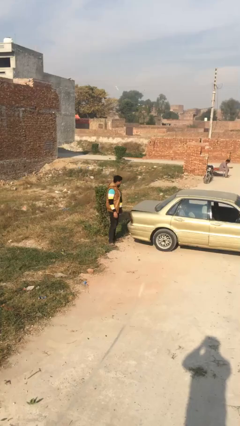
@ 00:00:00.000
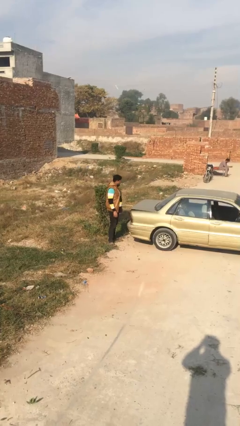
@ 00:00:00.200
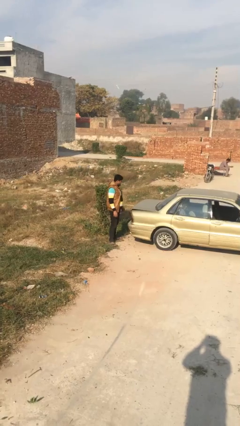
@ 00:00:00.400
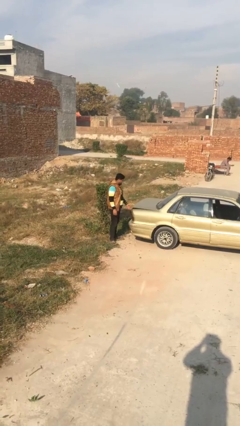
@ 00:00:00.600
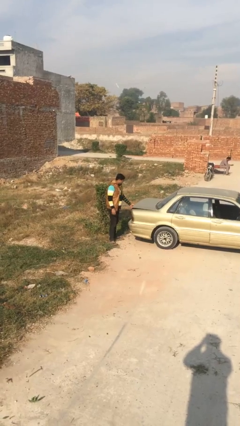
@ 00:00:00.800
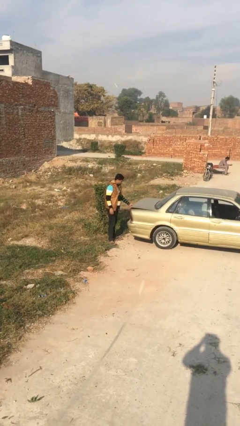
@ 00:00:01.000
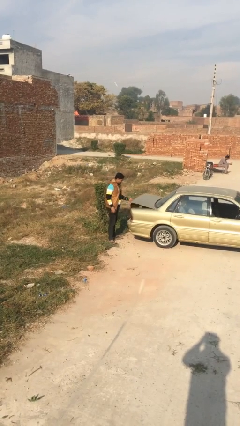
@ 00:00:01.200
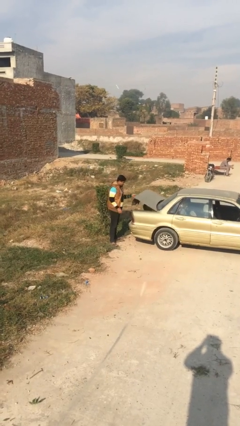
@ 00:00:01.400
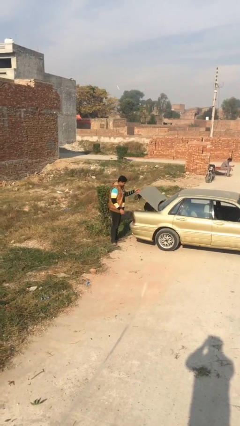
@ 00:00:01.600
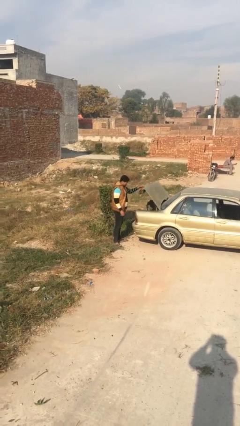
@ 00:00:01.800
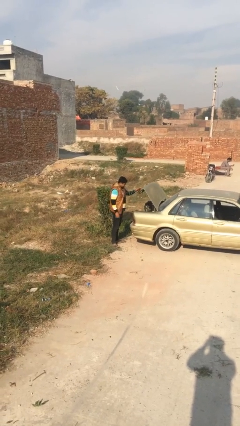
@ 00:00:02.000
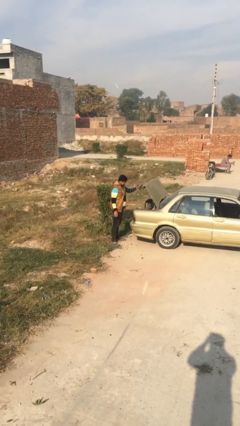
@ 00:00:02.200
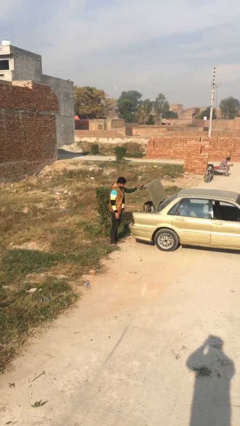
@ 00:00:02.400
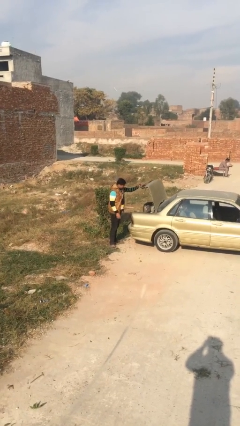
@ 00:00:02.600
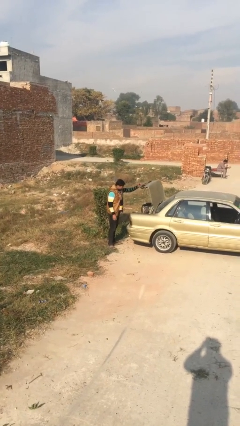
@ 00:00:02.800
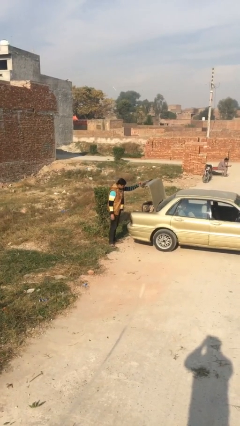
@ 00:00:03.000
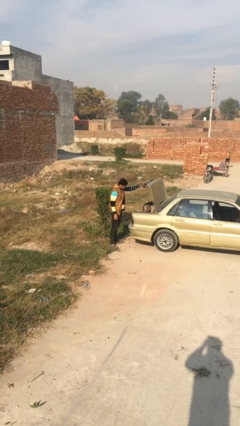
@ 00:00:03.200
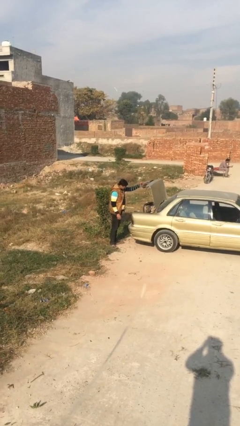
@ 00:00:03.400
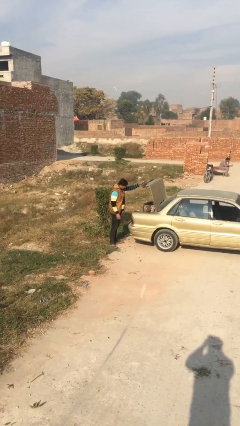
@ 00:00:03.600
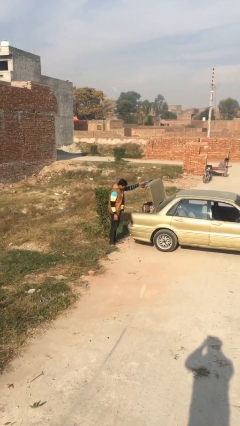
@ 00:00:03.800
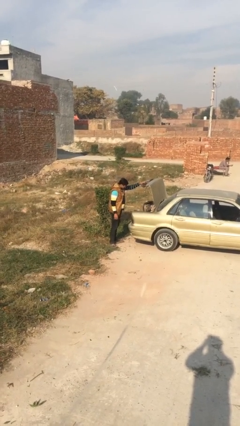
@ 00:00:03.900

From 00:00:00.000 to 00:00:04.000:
person opens car trunk

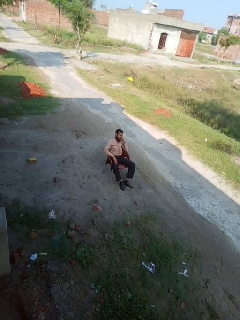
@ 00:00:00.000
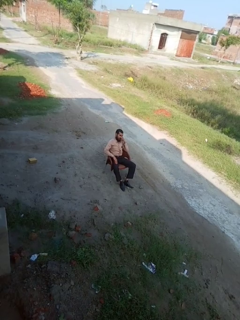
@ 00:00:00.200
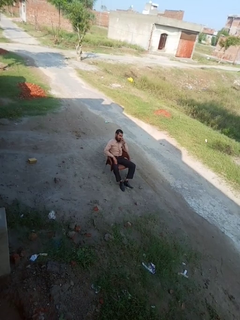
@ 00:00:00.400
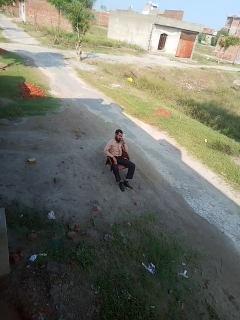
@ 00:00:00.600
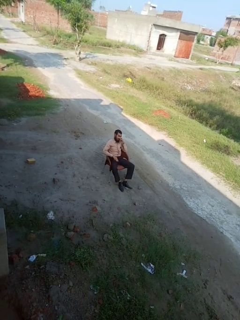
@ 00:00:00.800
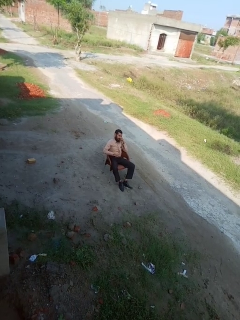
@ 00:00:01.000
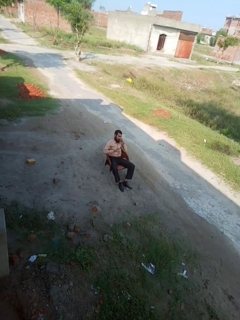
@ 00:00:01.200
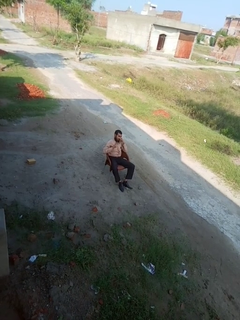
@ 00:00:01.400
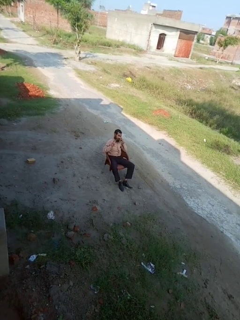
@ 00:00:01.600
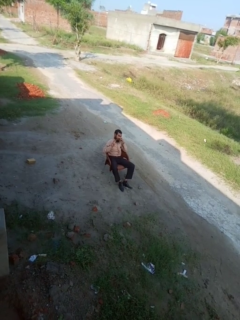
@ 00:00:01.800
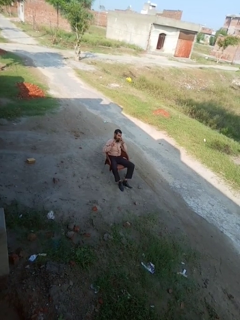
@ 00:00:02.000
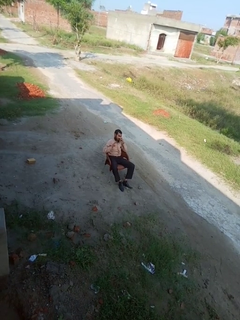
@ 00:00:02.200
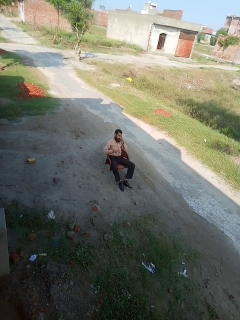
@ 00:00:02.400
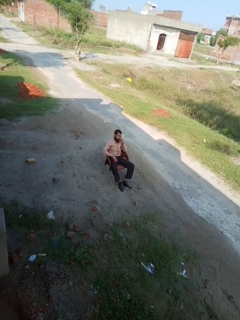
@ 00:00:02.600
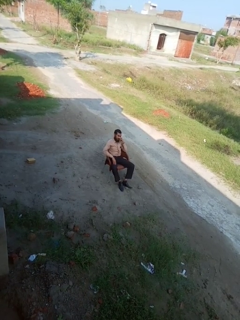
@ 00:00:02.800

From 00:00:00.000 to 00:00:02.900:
person gestures number three

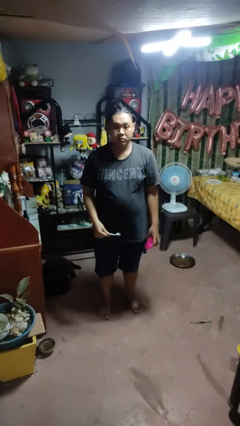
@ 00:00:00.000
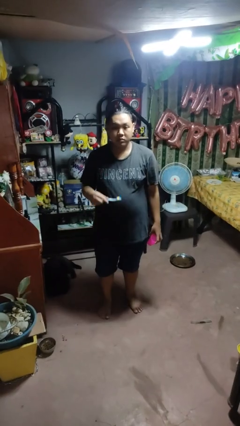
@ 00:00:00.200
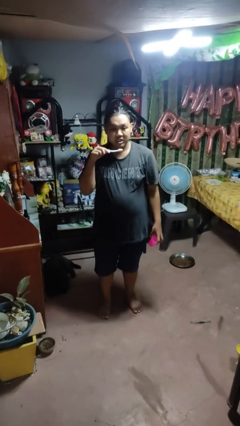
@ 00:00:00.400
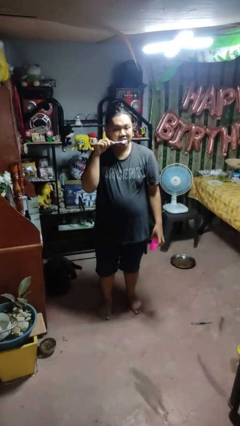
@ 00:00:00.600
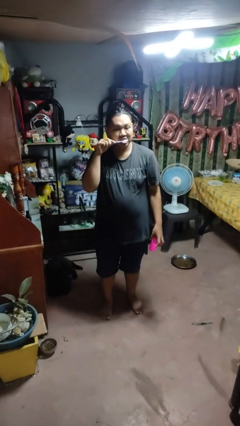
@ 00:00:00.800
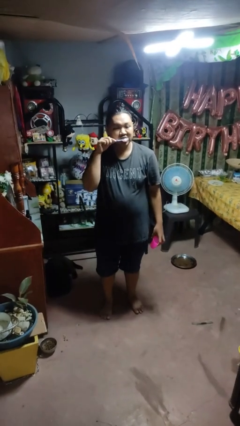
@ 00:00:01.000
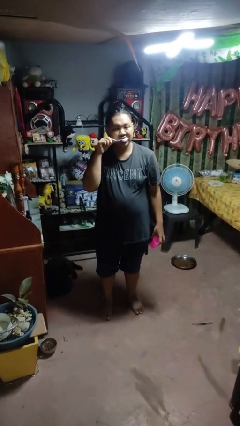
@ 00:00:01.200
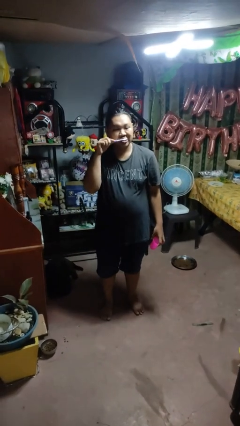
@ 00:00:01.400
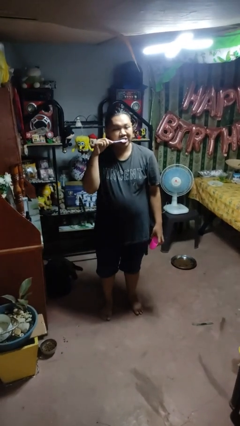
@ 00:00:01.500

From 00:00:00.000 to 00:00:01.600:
person brushes teeth

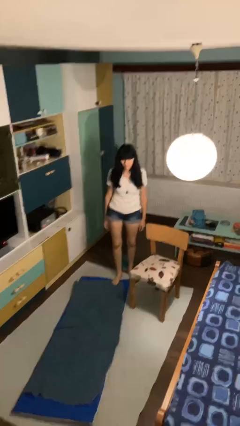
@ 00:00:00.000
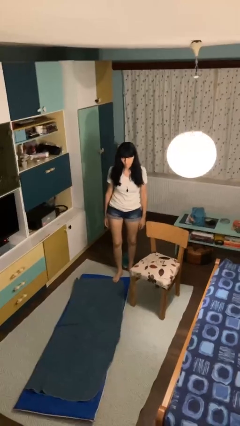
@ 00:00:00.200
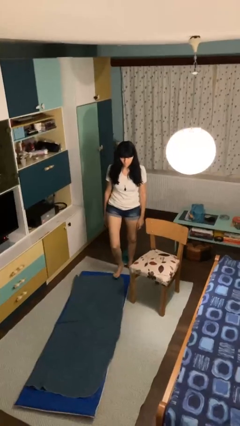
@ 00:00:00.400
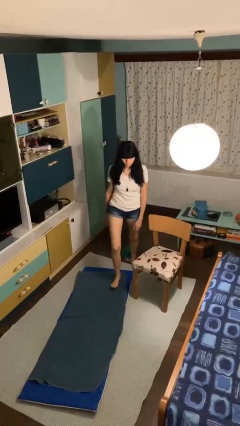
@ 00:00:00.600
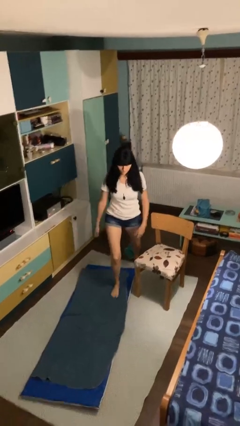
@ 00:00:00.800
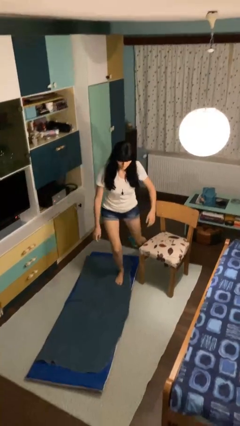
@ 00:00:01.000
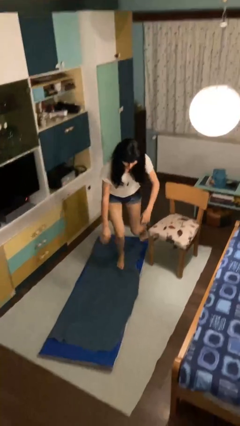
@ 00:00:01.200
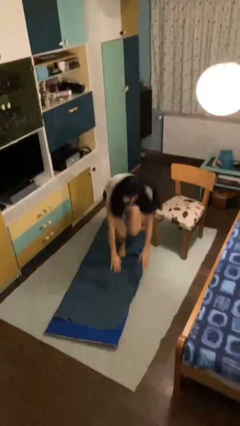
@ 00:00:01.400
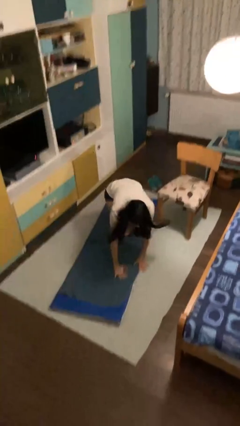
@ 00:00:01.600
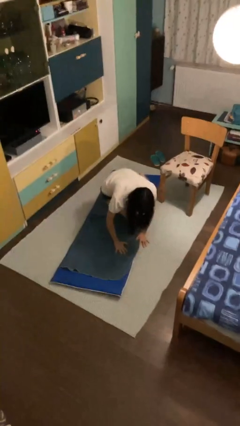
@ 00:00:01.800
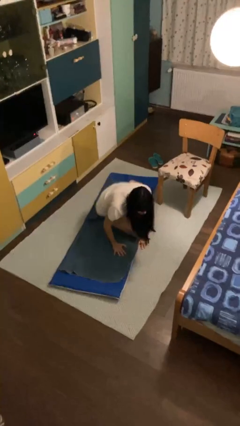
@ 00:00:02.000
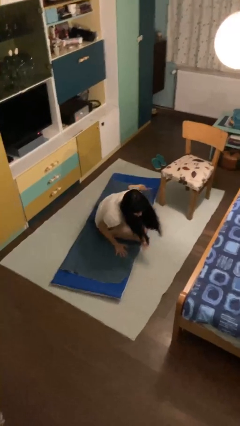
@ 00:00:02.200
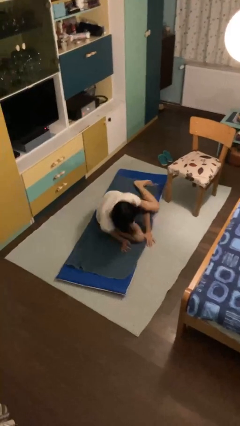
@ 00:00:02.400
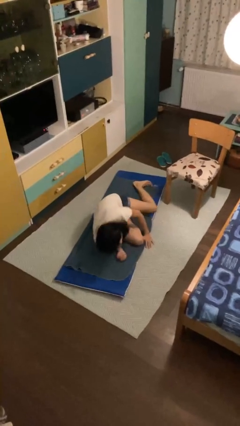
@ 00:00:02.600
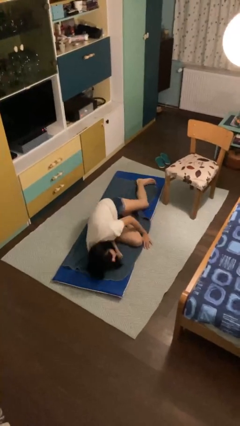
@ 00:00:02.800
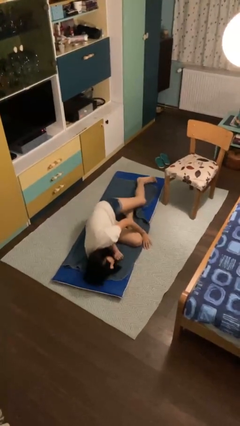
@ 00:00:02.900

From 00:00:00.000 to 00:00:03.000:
person trips on object on floor

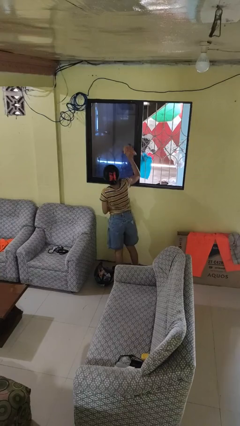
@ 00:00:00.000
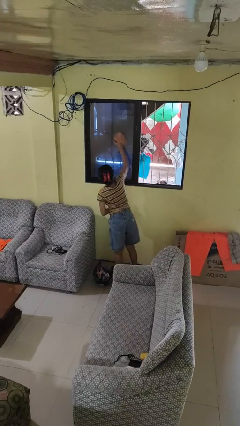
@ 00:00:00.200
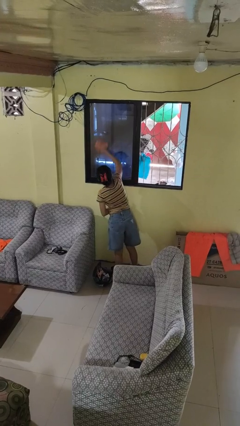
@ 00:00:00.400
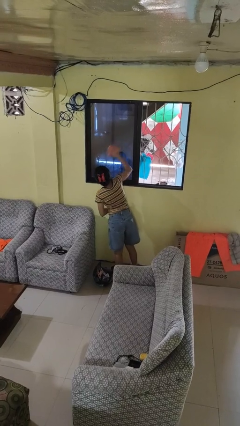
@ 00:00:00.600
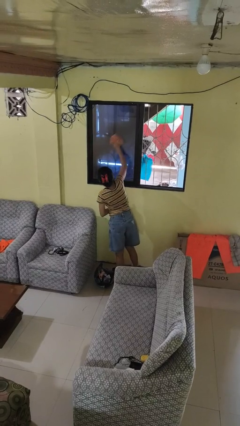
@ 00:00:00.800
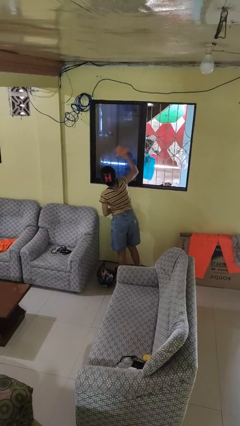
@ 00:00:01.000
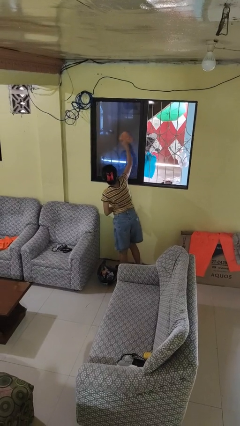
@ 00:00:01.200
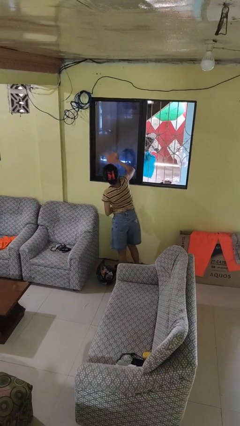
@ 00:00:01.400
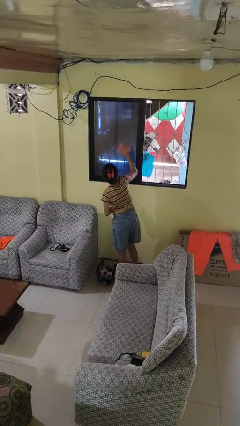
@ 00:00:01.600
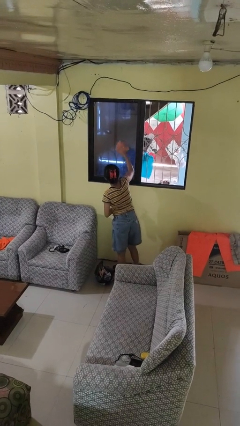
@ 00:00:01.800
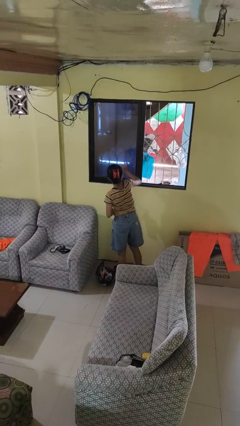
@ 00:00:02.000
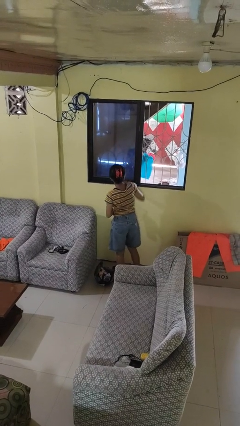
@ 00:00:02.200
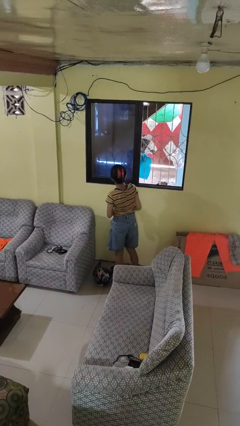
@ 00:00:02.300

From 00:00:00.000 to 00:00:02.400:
person washes window

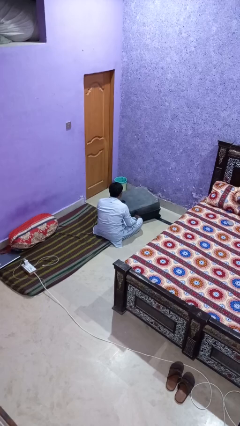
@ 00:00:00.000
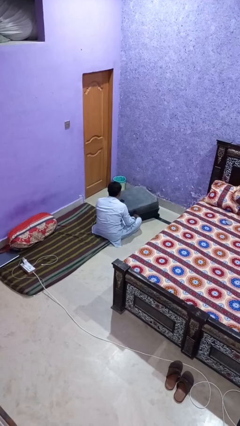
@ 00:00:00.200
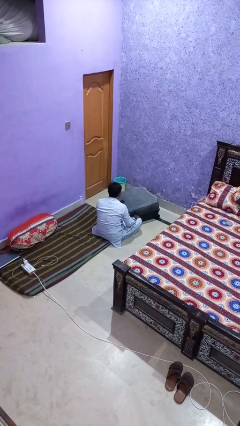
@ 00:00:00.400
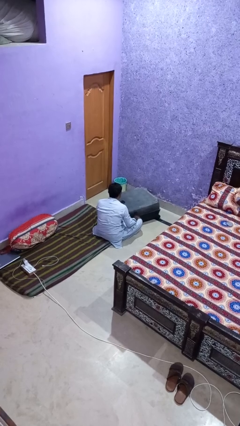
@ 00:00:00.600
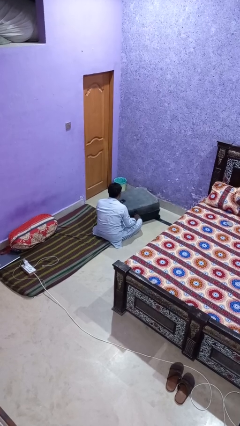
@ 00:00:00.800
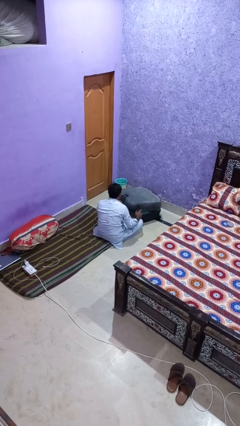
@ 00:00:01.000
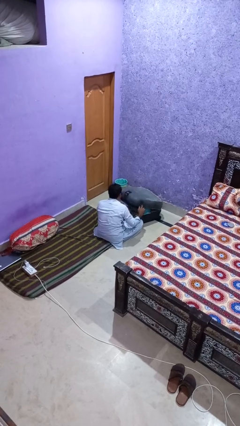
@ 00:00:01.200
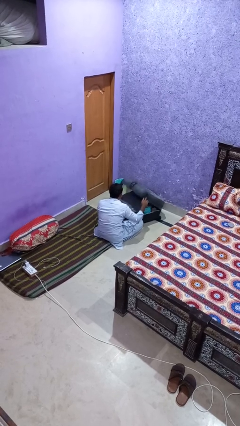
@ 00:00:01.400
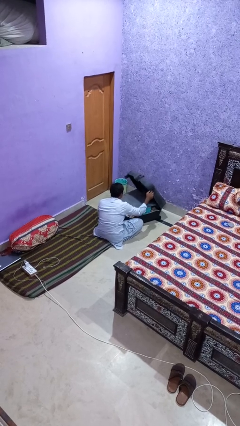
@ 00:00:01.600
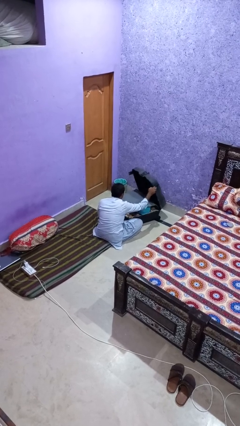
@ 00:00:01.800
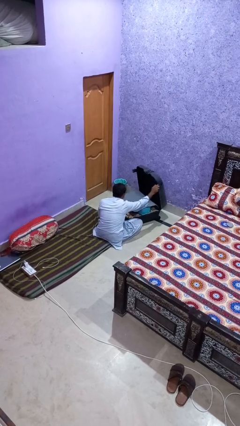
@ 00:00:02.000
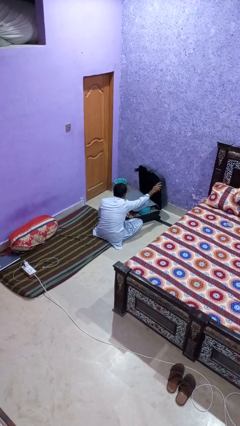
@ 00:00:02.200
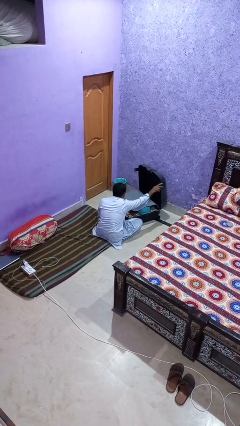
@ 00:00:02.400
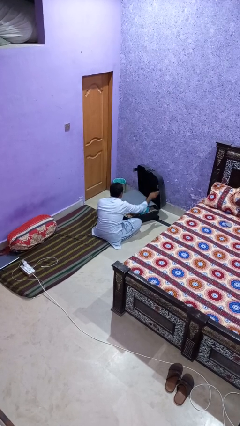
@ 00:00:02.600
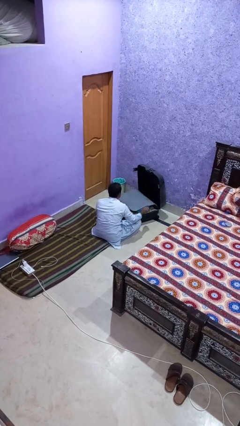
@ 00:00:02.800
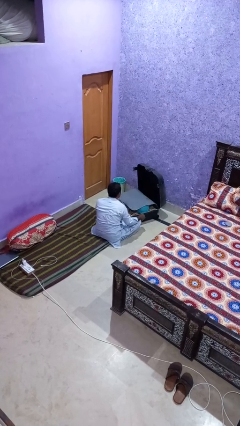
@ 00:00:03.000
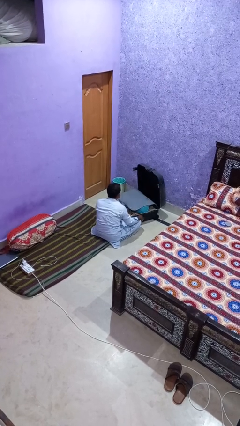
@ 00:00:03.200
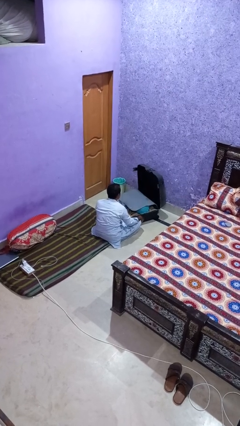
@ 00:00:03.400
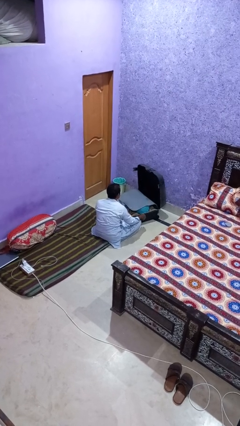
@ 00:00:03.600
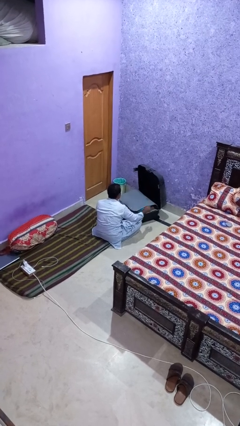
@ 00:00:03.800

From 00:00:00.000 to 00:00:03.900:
person opens suitcase
